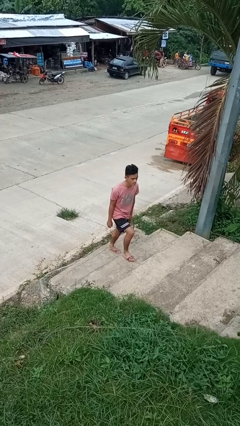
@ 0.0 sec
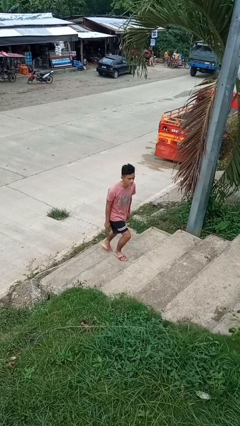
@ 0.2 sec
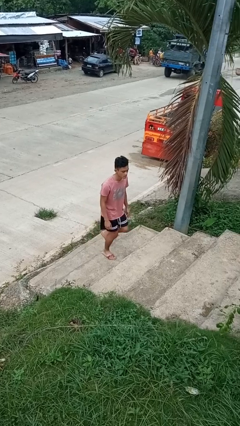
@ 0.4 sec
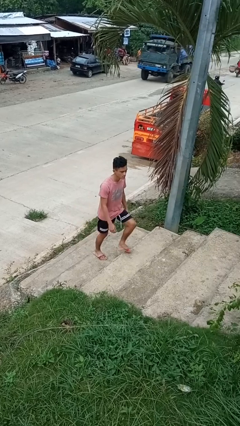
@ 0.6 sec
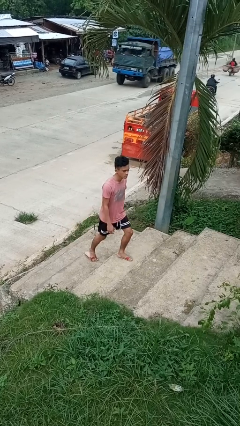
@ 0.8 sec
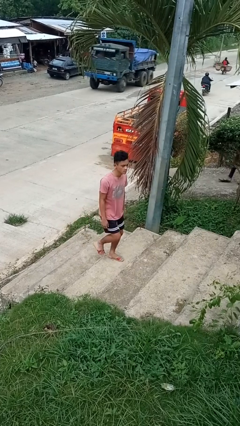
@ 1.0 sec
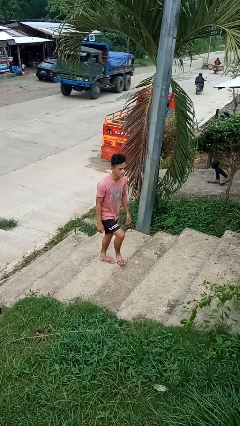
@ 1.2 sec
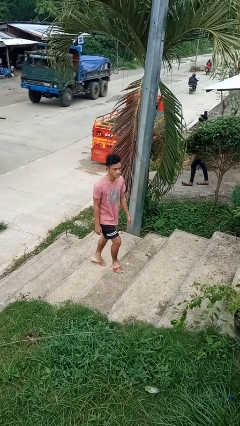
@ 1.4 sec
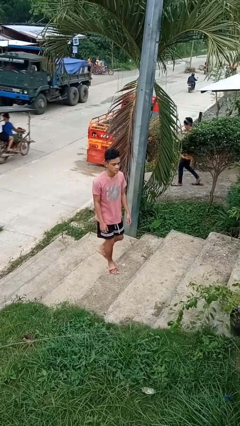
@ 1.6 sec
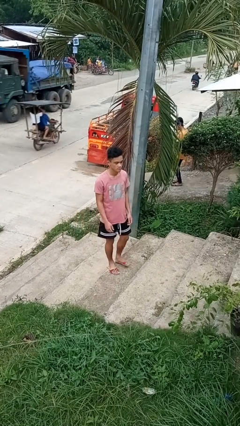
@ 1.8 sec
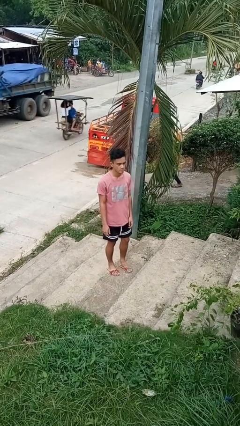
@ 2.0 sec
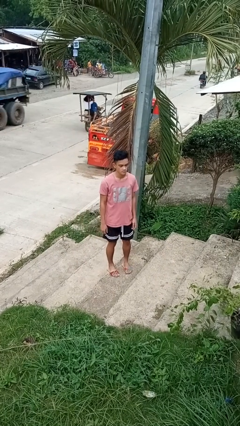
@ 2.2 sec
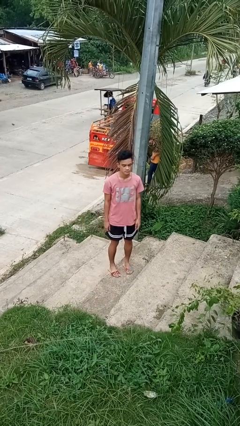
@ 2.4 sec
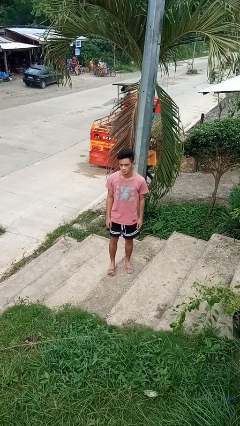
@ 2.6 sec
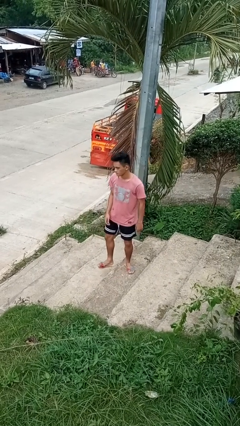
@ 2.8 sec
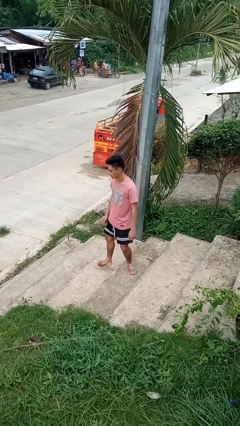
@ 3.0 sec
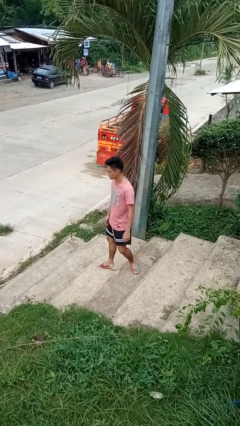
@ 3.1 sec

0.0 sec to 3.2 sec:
person climbs up stairs

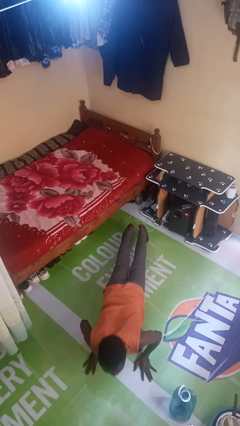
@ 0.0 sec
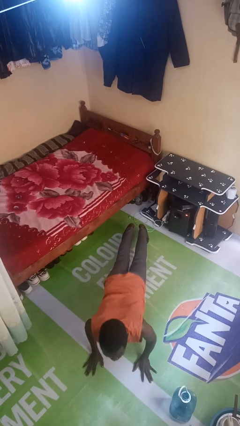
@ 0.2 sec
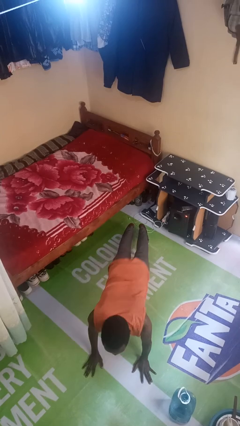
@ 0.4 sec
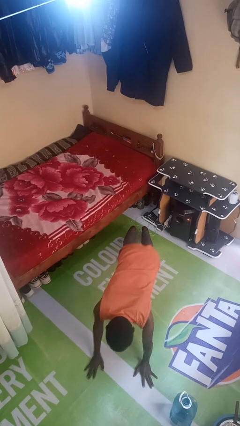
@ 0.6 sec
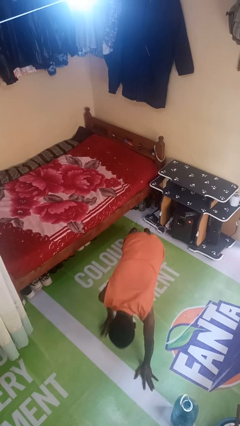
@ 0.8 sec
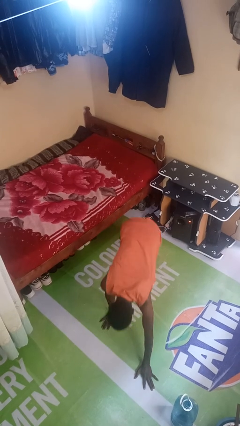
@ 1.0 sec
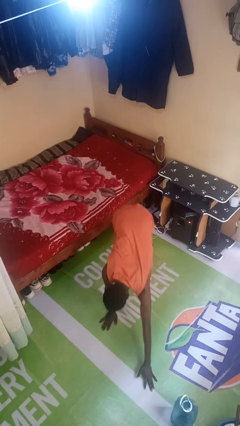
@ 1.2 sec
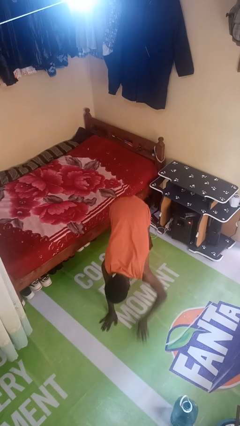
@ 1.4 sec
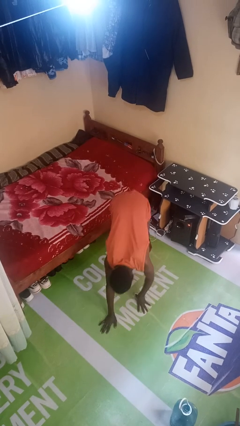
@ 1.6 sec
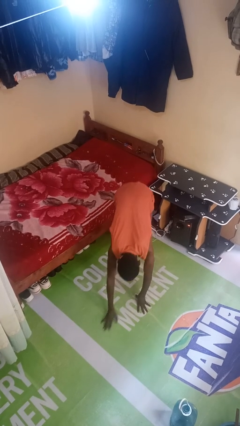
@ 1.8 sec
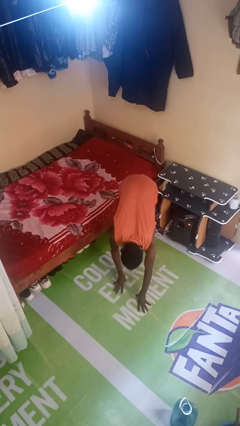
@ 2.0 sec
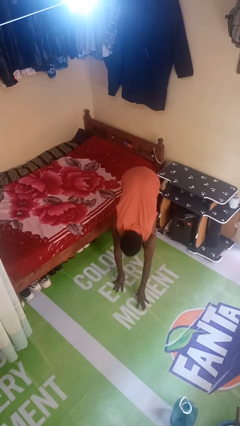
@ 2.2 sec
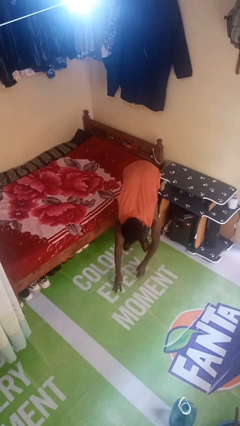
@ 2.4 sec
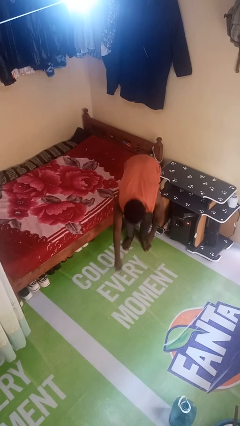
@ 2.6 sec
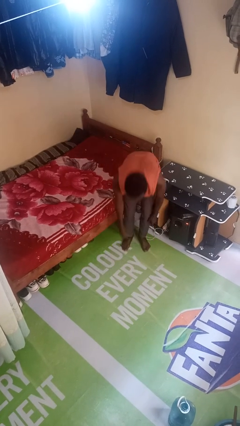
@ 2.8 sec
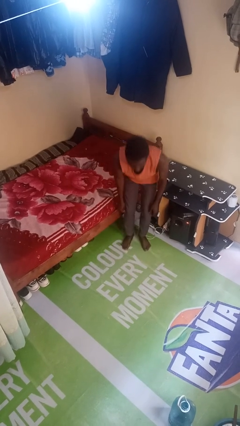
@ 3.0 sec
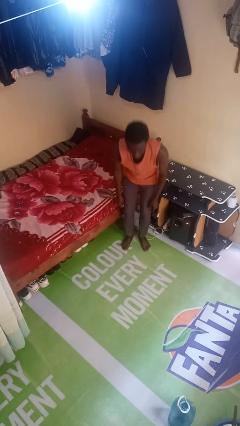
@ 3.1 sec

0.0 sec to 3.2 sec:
person stands up from floor

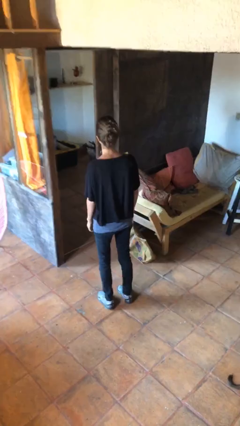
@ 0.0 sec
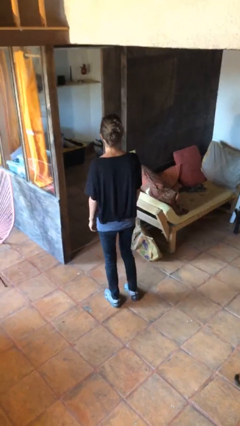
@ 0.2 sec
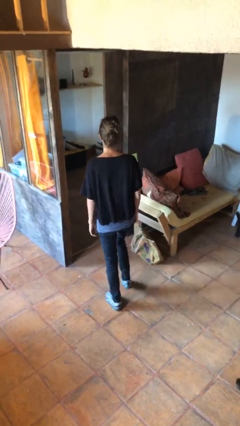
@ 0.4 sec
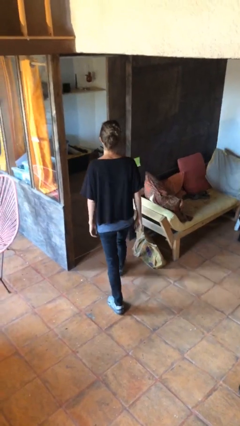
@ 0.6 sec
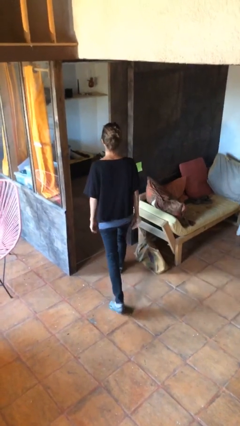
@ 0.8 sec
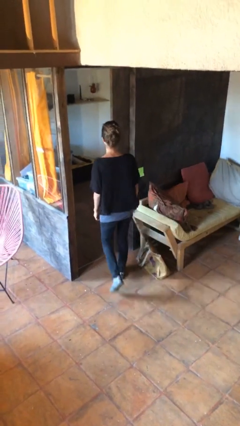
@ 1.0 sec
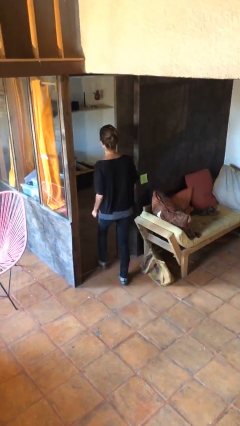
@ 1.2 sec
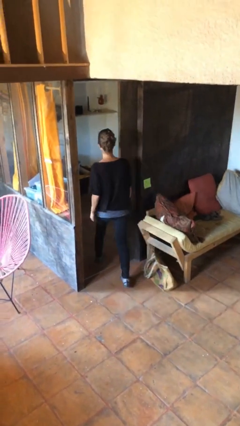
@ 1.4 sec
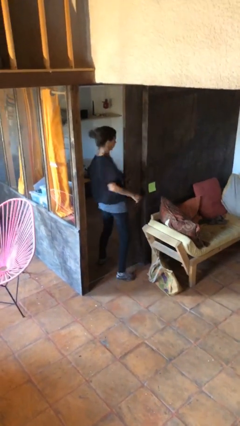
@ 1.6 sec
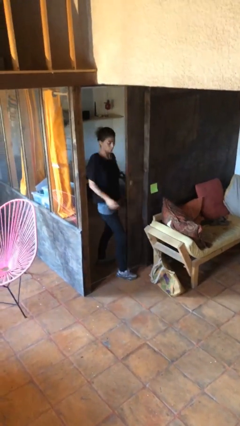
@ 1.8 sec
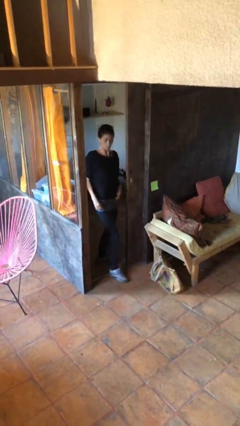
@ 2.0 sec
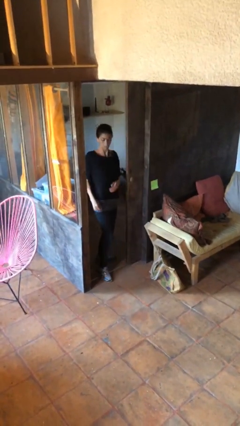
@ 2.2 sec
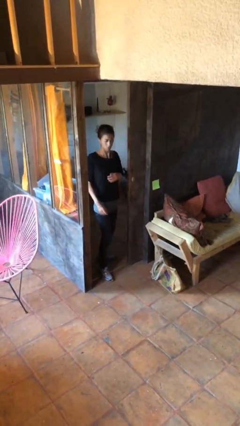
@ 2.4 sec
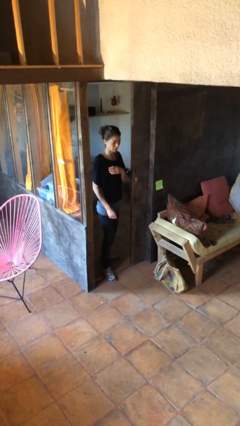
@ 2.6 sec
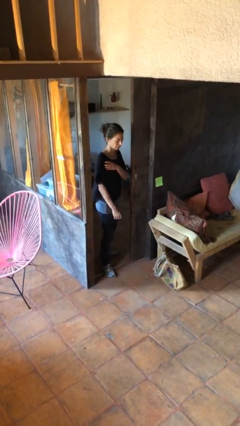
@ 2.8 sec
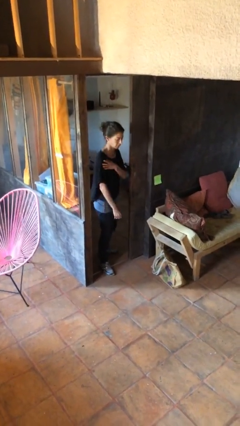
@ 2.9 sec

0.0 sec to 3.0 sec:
person bumps into wall

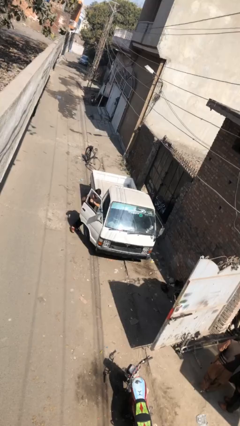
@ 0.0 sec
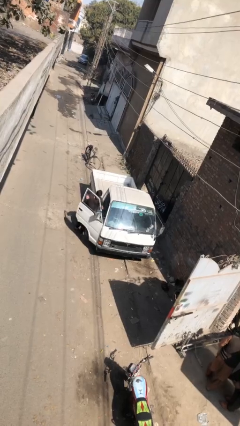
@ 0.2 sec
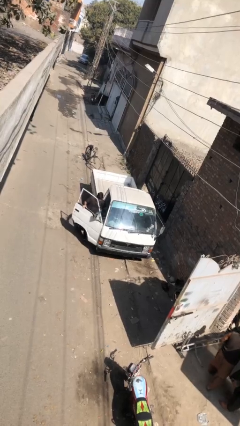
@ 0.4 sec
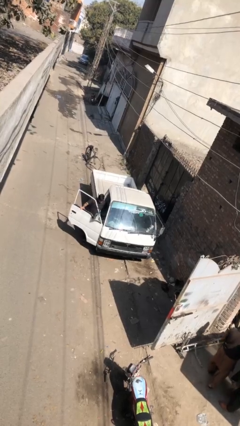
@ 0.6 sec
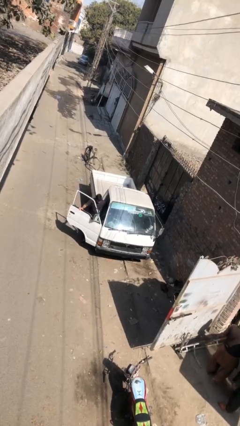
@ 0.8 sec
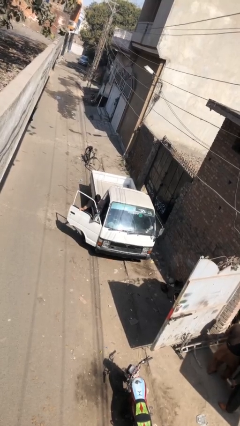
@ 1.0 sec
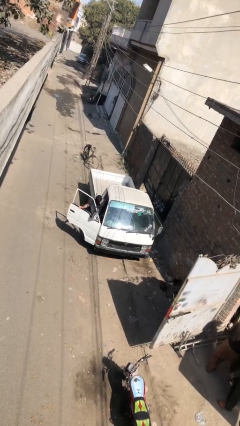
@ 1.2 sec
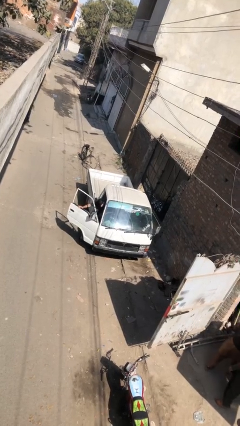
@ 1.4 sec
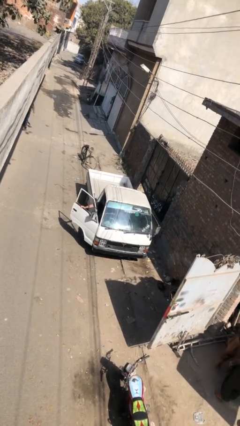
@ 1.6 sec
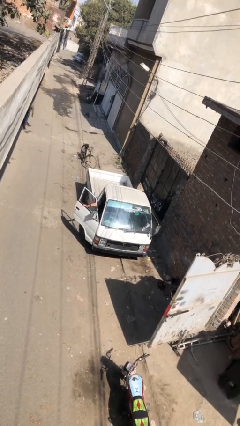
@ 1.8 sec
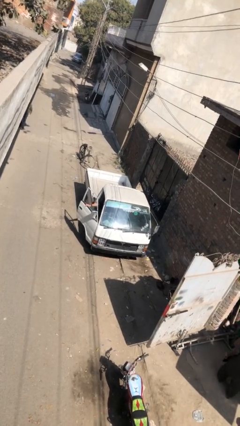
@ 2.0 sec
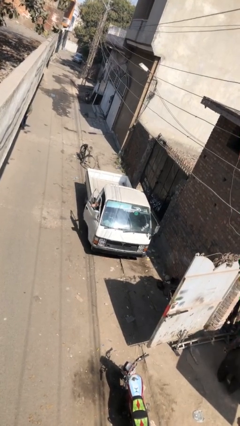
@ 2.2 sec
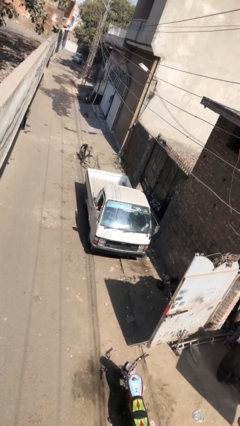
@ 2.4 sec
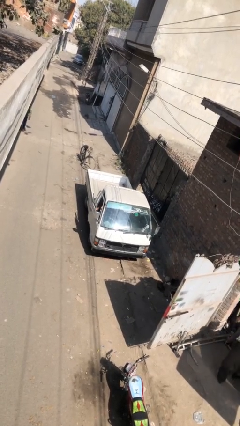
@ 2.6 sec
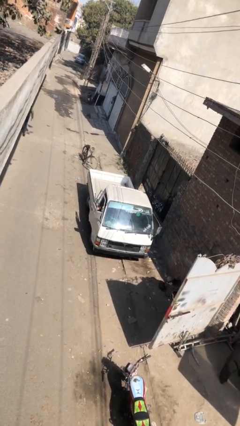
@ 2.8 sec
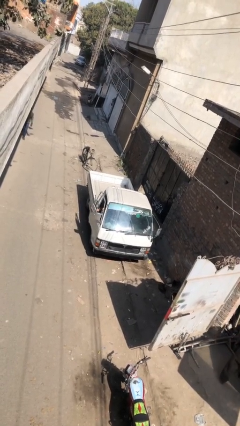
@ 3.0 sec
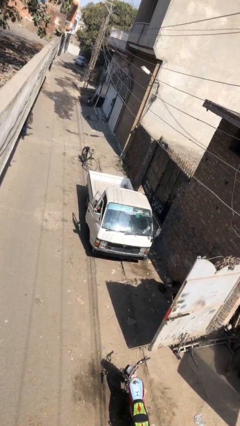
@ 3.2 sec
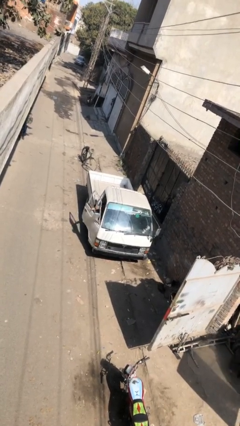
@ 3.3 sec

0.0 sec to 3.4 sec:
car picks up person

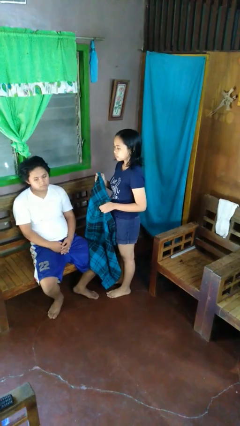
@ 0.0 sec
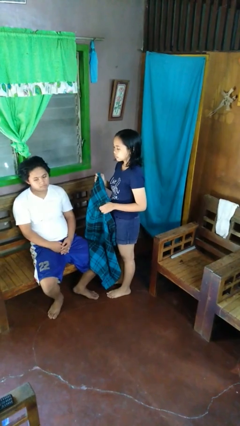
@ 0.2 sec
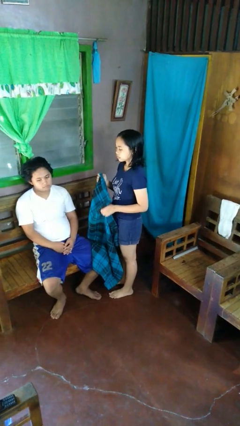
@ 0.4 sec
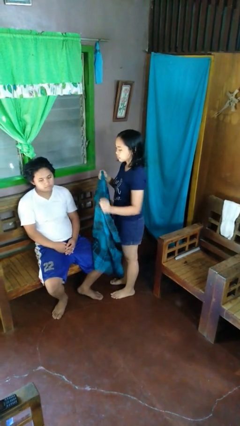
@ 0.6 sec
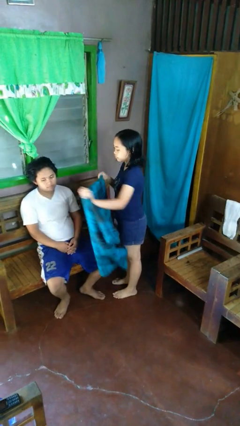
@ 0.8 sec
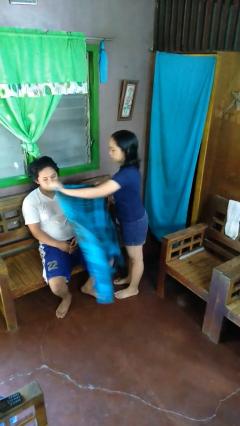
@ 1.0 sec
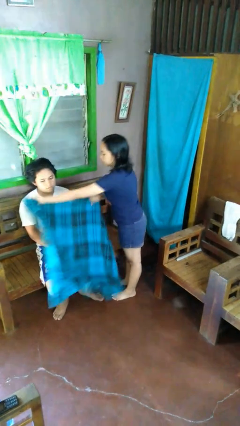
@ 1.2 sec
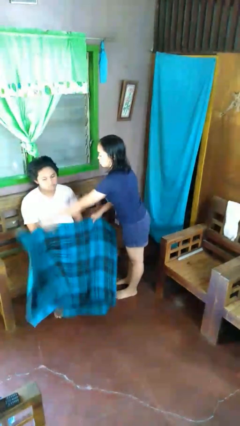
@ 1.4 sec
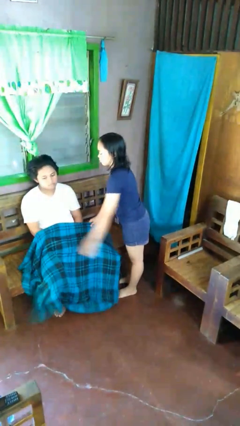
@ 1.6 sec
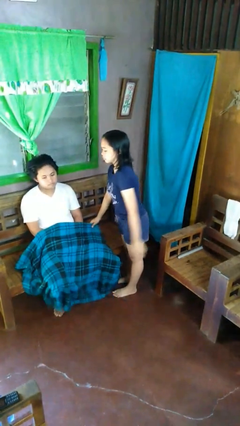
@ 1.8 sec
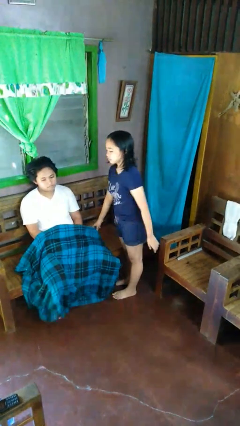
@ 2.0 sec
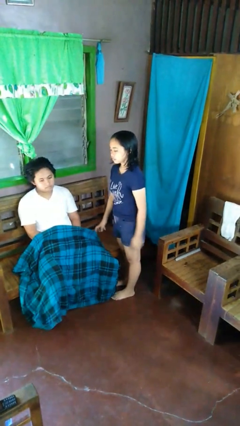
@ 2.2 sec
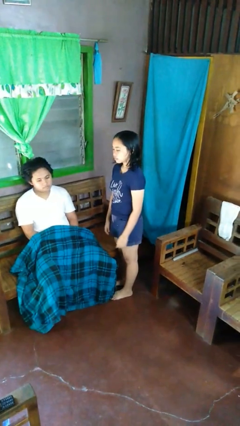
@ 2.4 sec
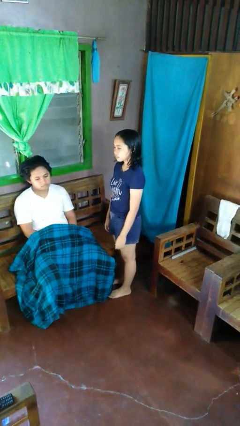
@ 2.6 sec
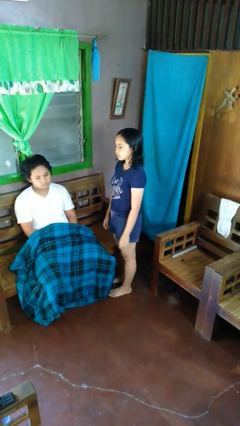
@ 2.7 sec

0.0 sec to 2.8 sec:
person covers friend with blanket

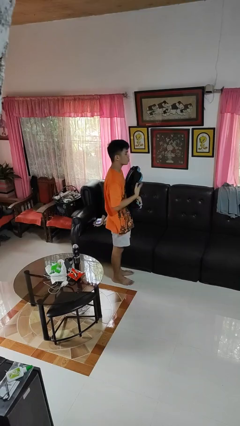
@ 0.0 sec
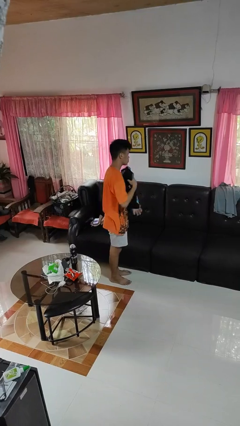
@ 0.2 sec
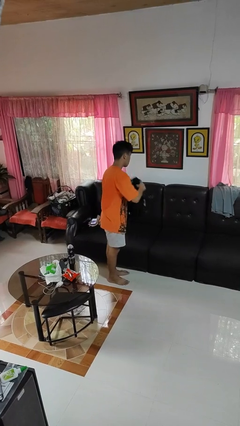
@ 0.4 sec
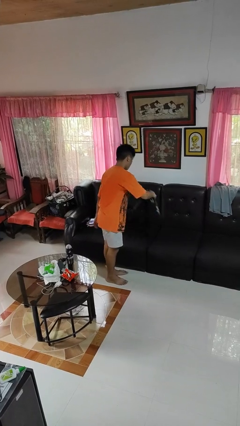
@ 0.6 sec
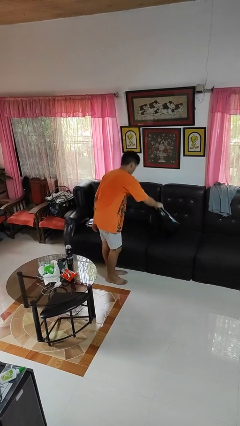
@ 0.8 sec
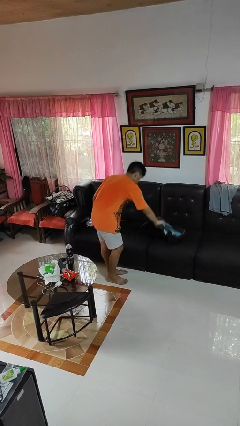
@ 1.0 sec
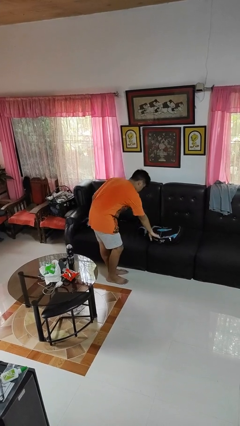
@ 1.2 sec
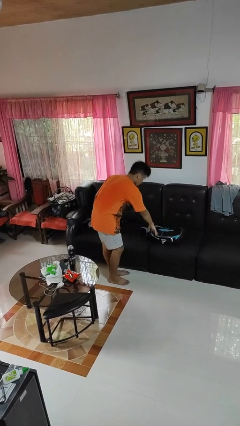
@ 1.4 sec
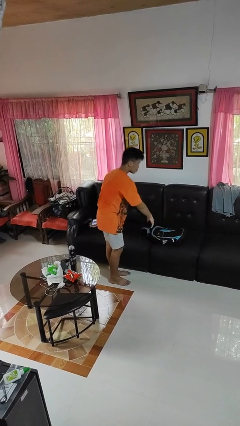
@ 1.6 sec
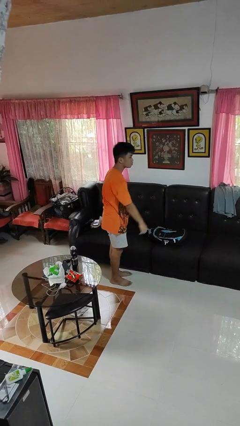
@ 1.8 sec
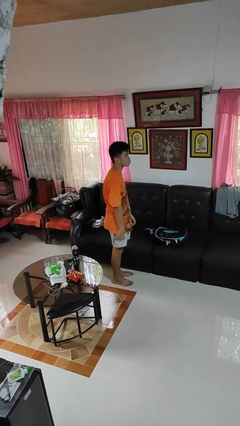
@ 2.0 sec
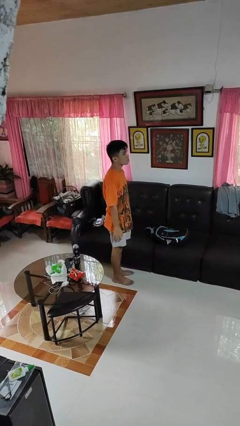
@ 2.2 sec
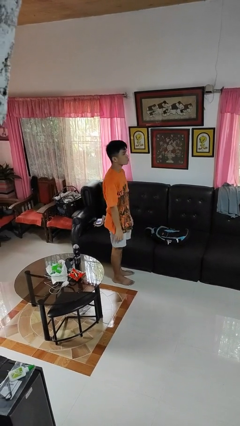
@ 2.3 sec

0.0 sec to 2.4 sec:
person puts down object on couch
